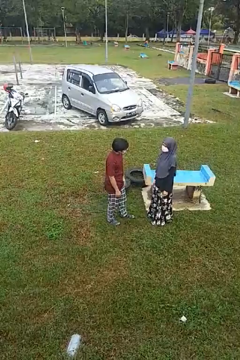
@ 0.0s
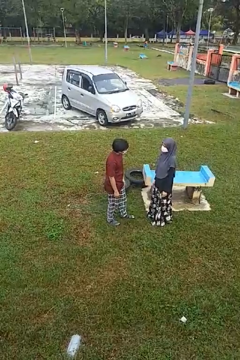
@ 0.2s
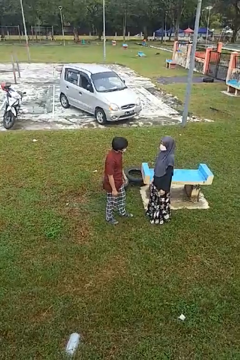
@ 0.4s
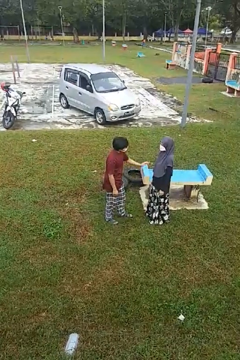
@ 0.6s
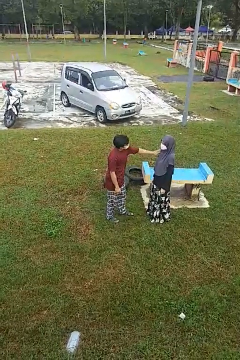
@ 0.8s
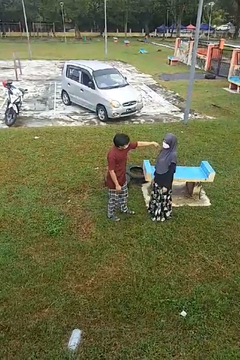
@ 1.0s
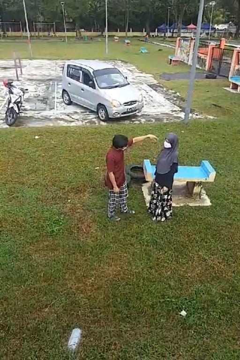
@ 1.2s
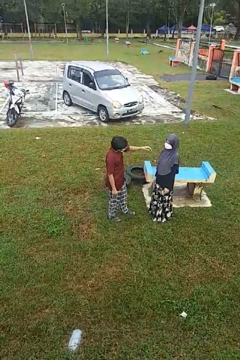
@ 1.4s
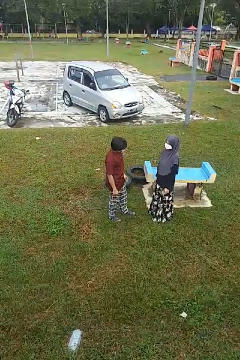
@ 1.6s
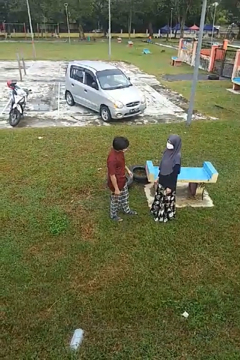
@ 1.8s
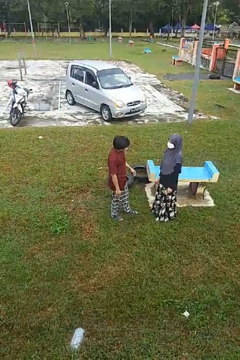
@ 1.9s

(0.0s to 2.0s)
person shoves person

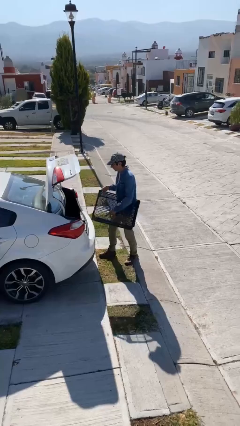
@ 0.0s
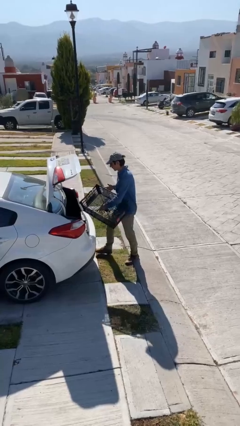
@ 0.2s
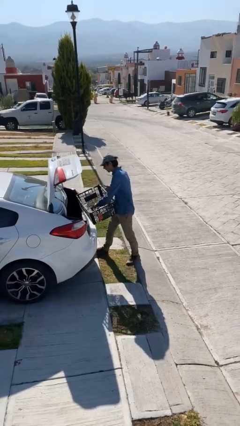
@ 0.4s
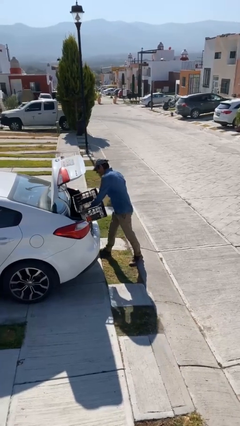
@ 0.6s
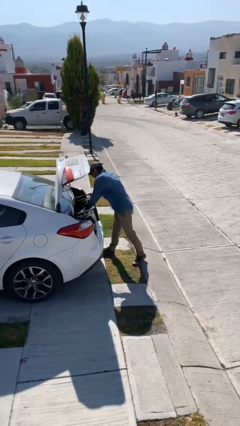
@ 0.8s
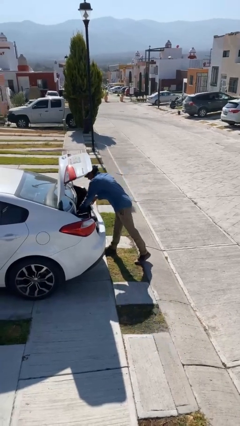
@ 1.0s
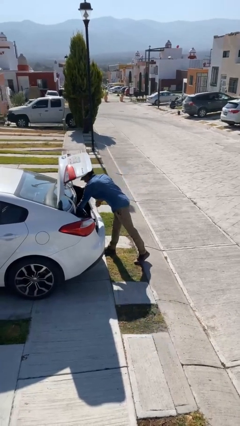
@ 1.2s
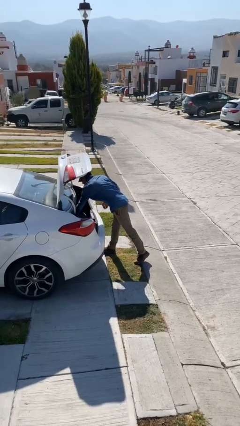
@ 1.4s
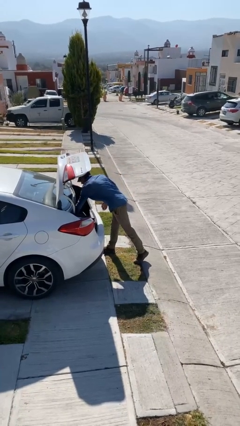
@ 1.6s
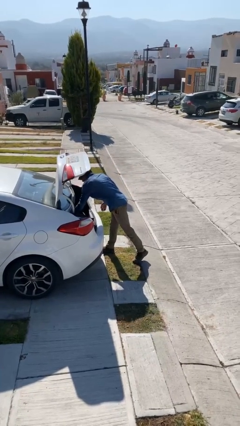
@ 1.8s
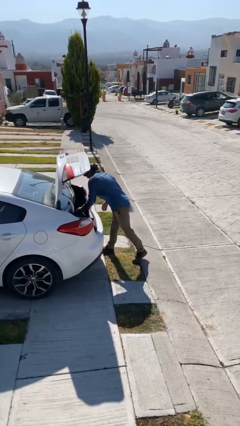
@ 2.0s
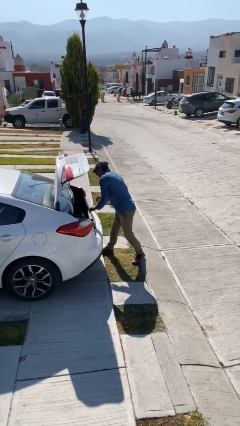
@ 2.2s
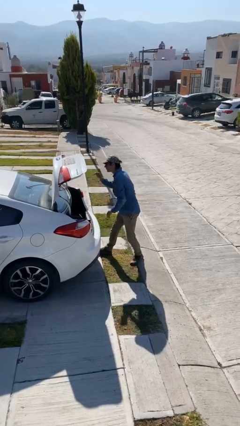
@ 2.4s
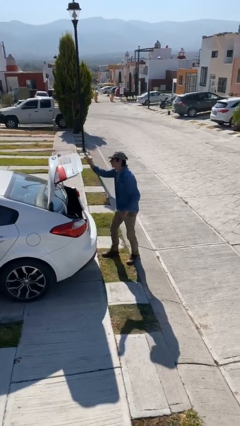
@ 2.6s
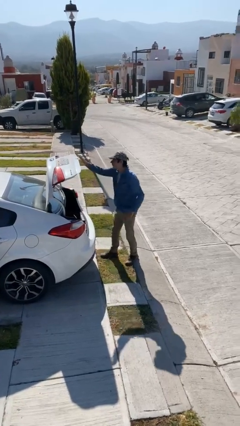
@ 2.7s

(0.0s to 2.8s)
person loads car

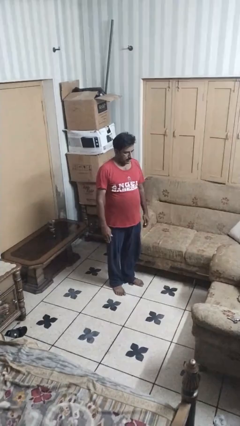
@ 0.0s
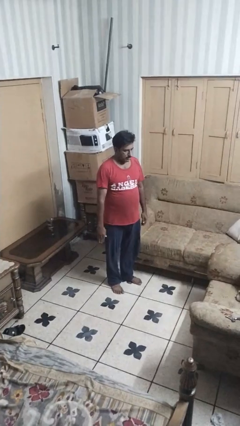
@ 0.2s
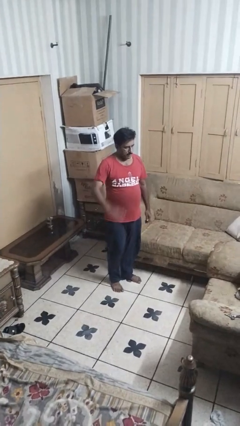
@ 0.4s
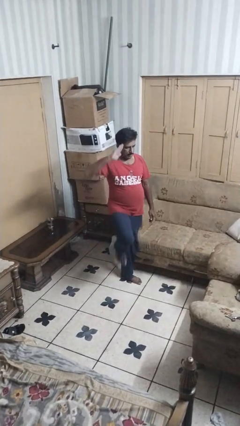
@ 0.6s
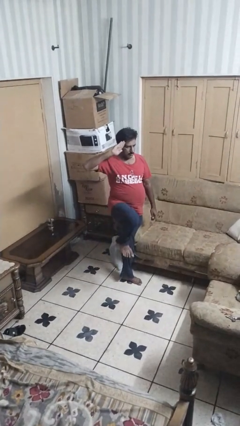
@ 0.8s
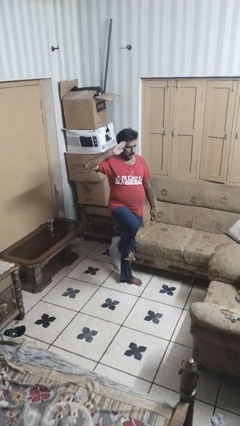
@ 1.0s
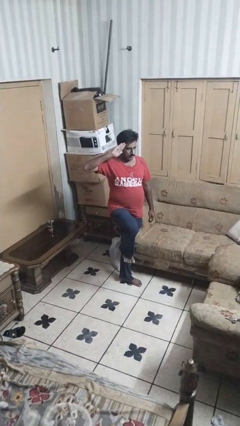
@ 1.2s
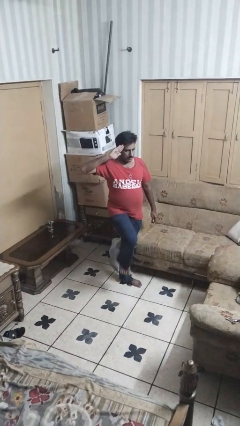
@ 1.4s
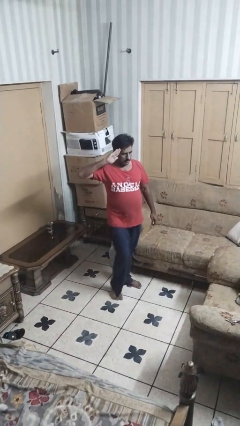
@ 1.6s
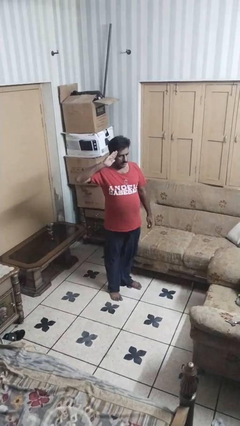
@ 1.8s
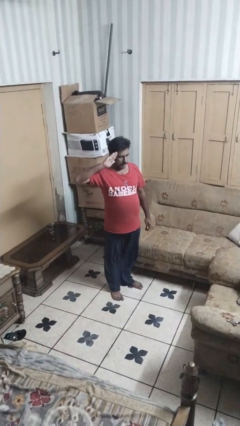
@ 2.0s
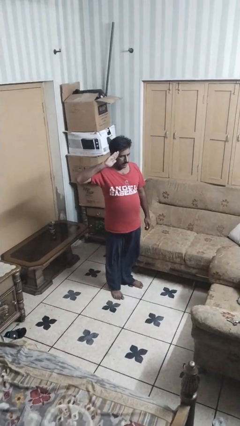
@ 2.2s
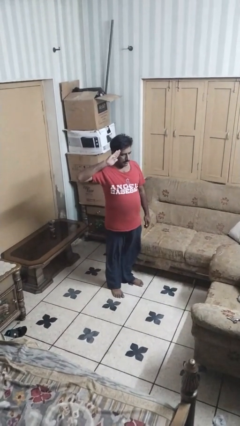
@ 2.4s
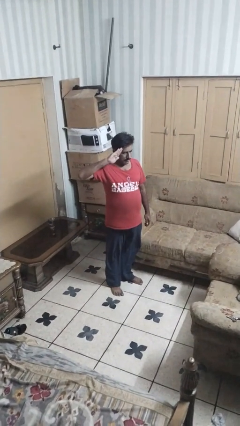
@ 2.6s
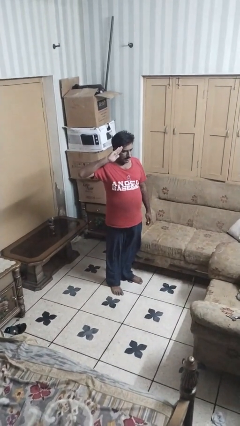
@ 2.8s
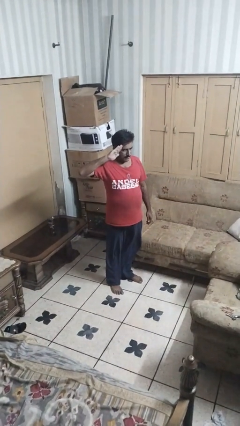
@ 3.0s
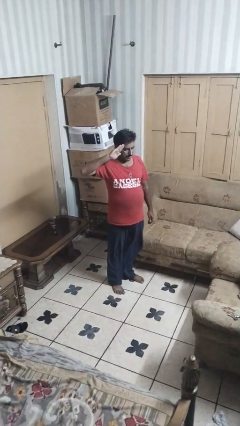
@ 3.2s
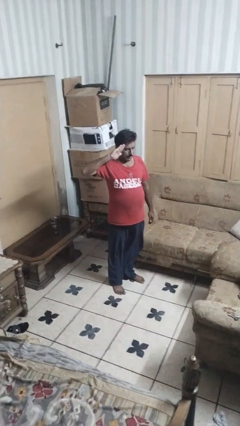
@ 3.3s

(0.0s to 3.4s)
person salutes

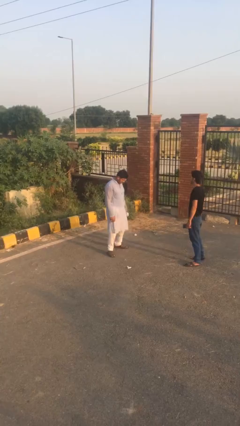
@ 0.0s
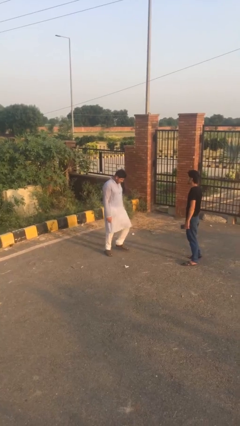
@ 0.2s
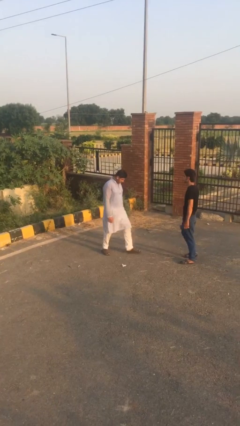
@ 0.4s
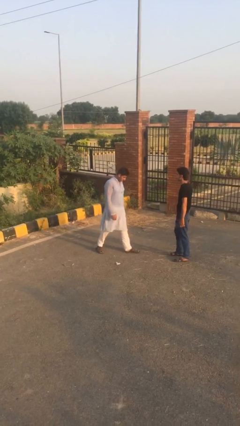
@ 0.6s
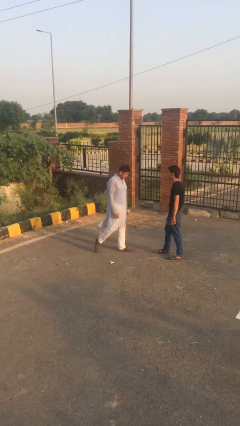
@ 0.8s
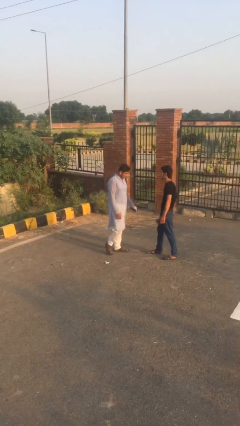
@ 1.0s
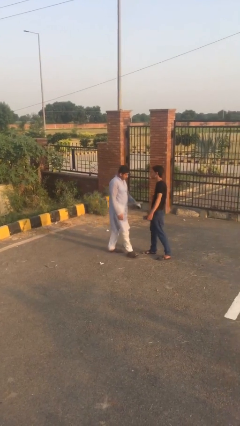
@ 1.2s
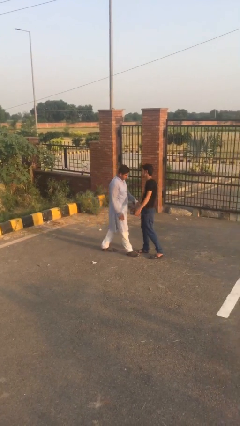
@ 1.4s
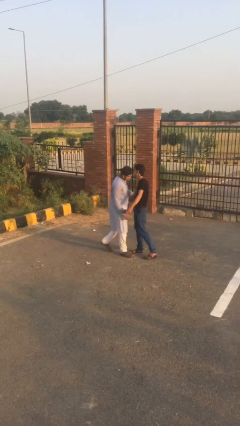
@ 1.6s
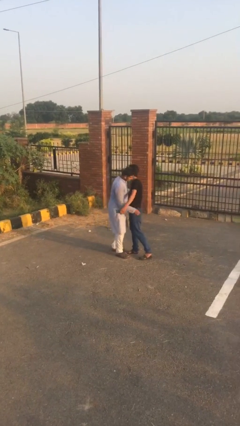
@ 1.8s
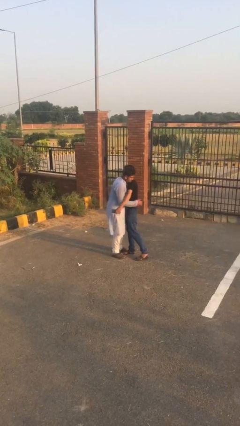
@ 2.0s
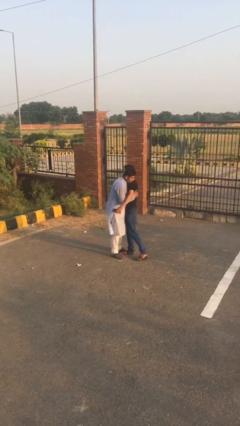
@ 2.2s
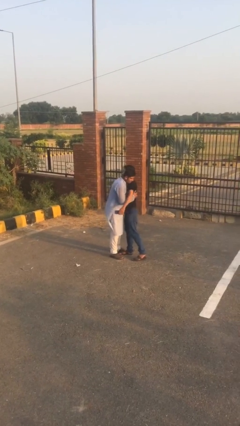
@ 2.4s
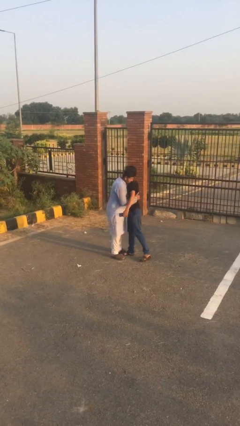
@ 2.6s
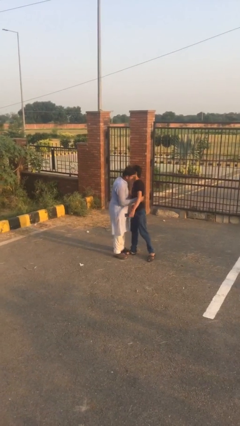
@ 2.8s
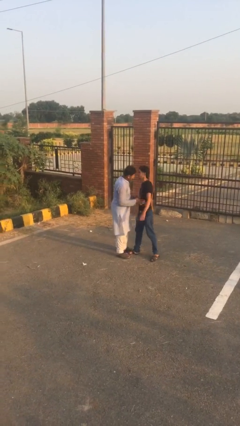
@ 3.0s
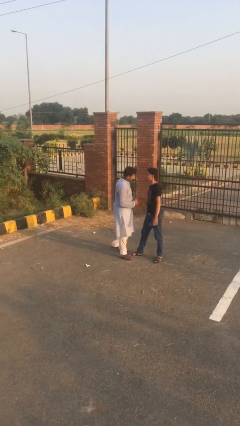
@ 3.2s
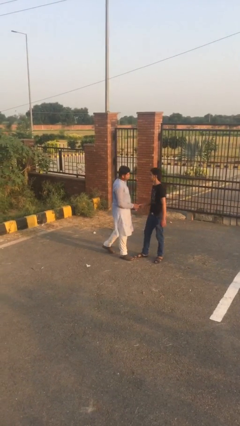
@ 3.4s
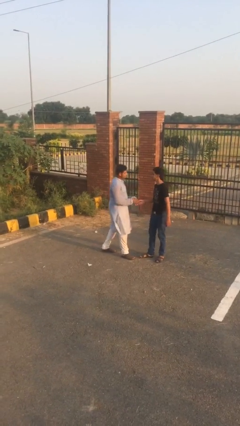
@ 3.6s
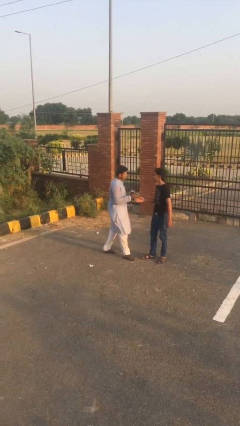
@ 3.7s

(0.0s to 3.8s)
person embraces person

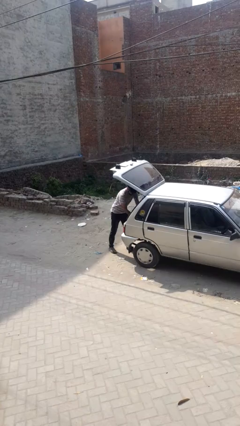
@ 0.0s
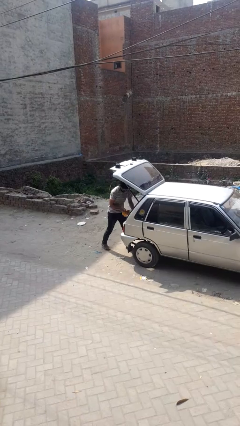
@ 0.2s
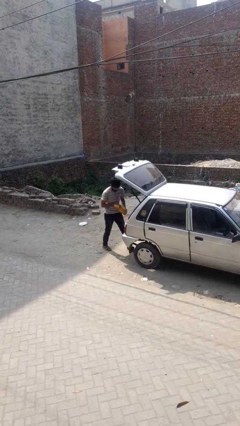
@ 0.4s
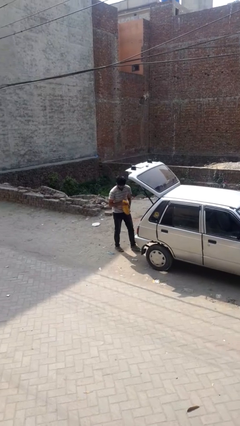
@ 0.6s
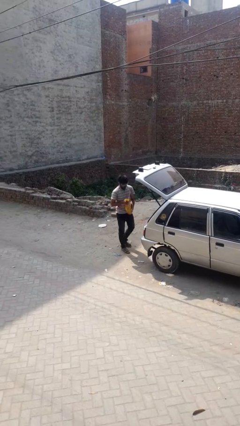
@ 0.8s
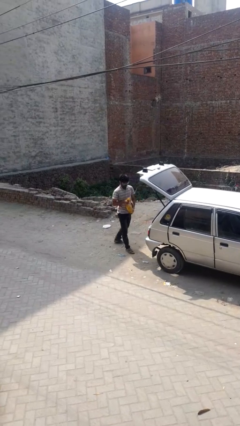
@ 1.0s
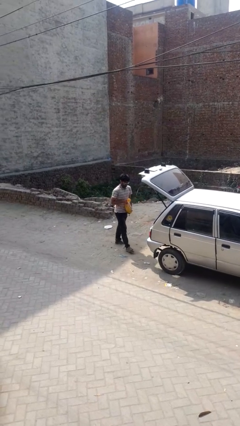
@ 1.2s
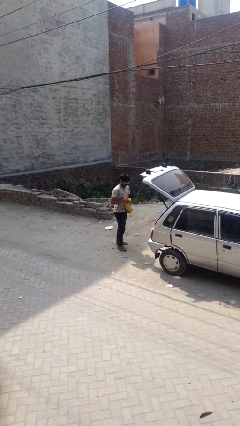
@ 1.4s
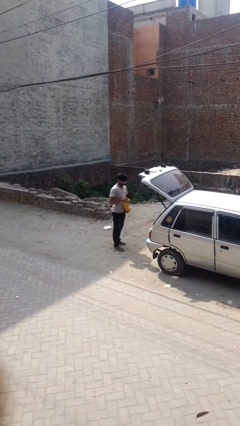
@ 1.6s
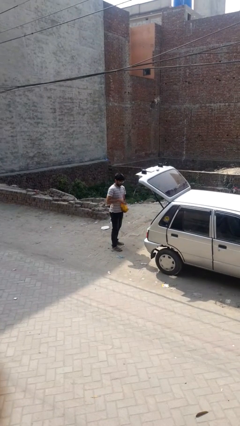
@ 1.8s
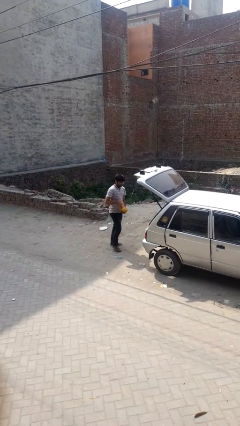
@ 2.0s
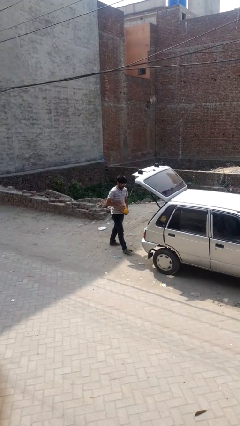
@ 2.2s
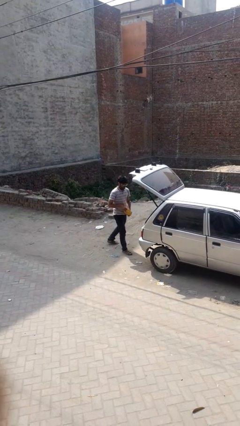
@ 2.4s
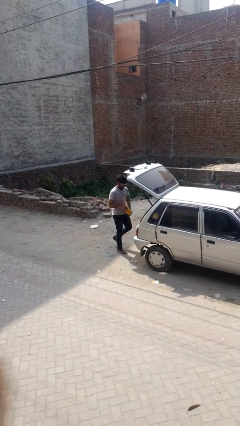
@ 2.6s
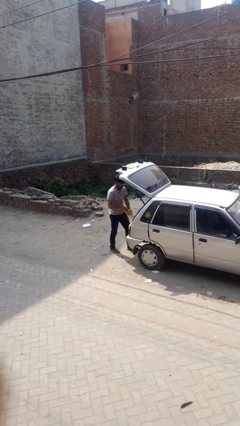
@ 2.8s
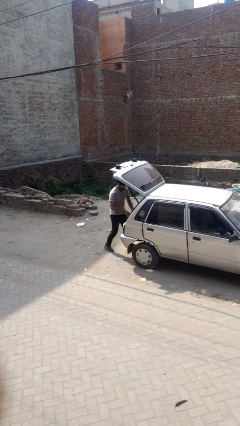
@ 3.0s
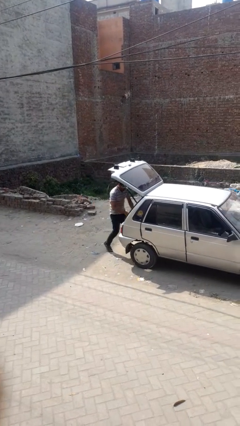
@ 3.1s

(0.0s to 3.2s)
person unloads car

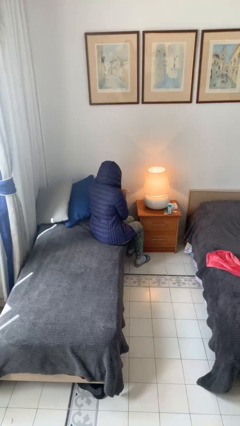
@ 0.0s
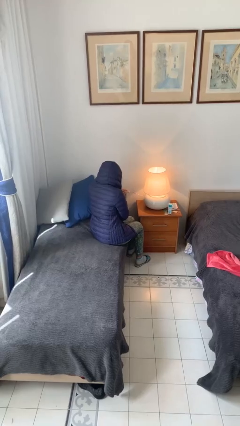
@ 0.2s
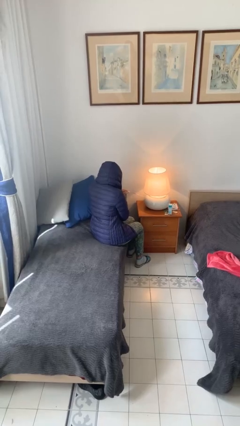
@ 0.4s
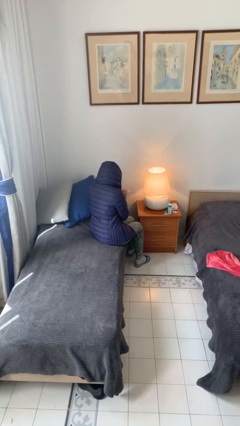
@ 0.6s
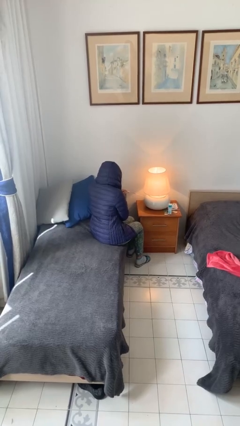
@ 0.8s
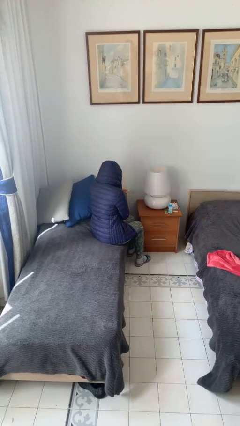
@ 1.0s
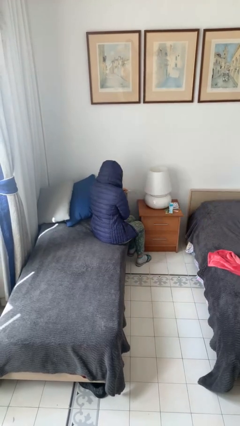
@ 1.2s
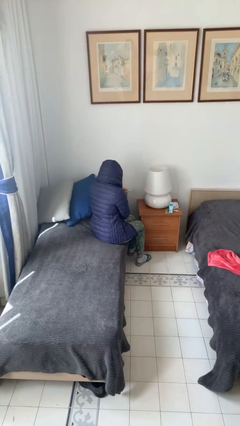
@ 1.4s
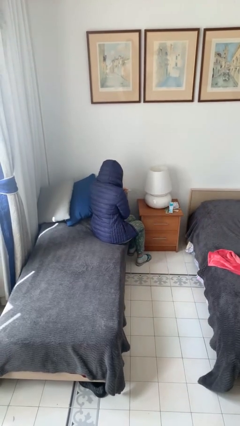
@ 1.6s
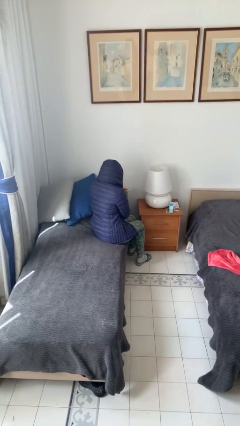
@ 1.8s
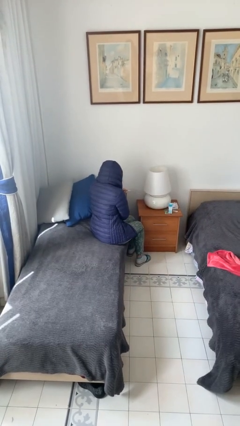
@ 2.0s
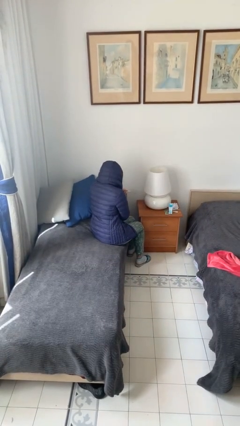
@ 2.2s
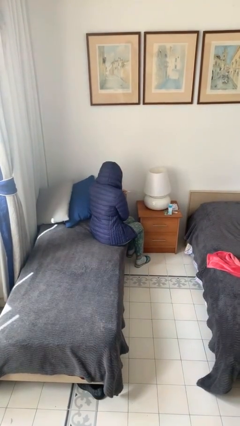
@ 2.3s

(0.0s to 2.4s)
person turns off lamp

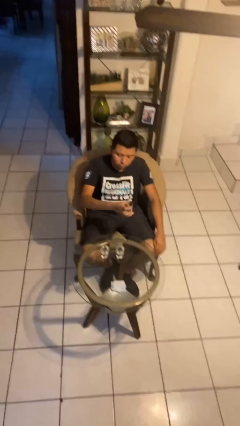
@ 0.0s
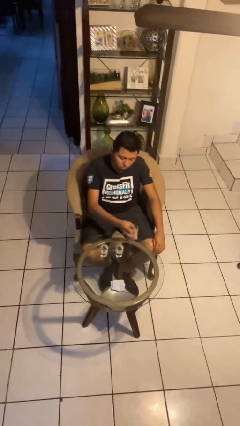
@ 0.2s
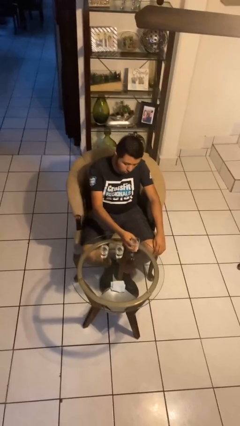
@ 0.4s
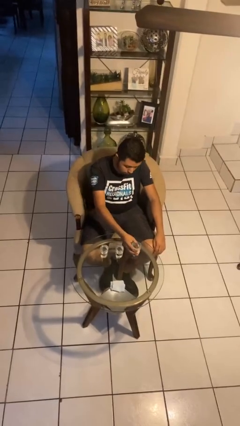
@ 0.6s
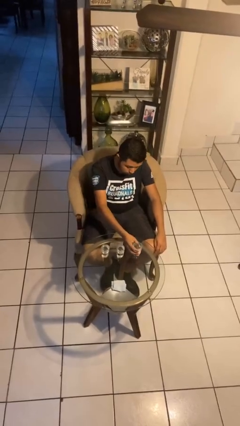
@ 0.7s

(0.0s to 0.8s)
person puts down object on table
